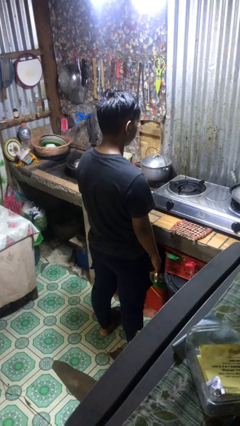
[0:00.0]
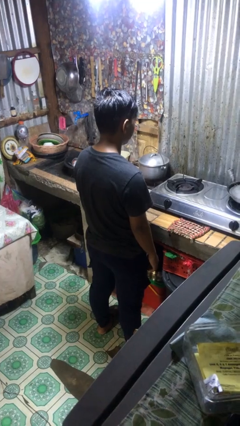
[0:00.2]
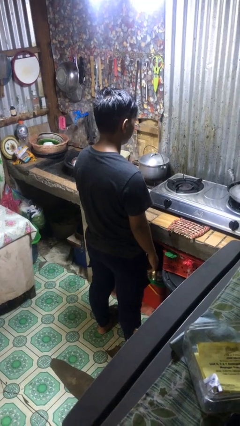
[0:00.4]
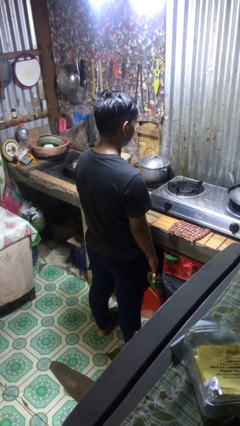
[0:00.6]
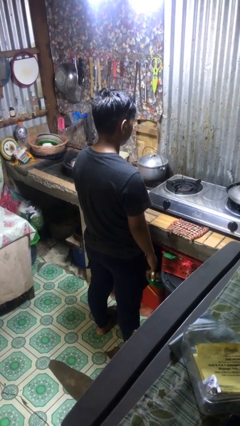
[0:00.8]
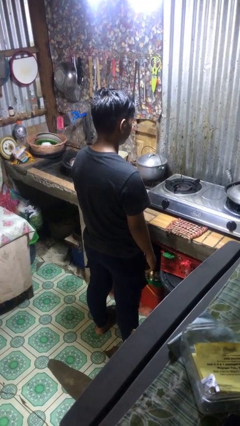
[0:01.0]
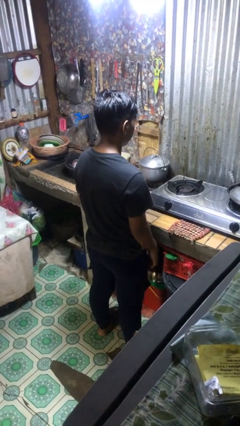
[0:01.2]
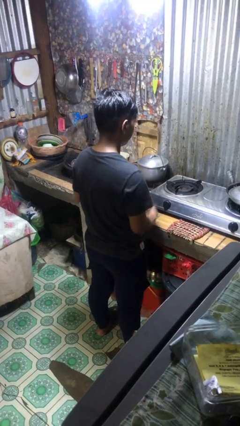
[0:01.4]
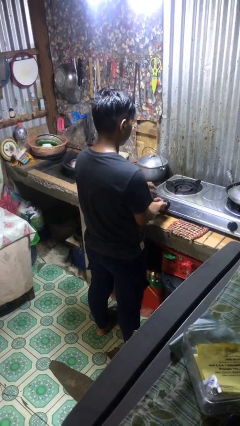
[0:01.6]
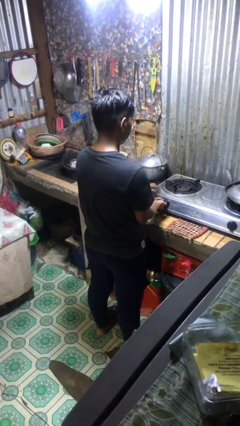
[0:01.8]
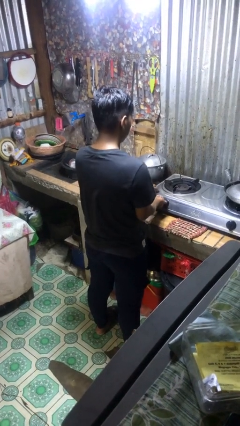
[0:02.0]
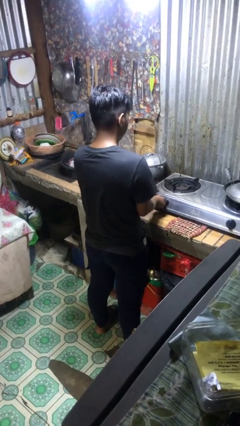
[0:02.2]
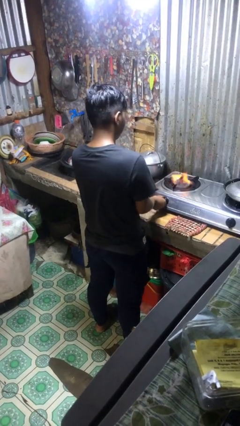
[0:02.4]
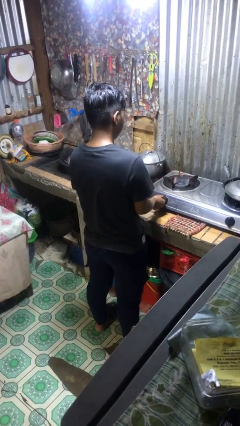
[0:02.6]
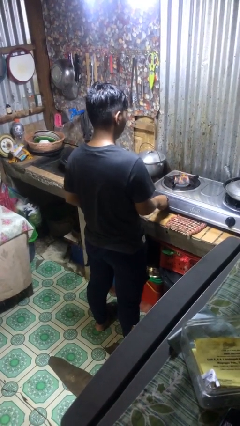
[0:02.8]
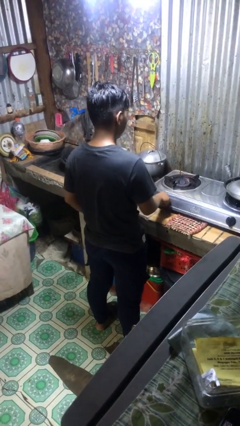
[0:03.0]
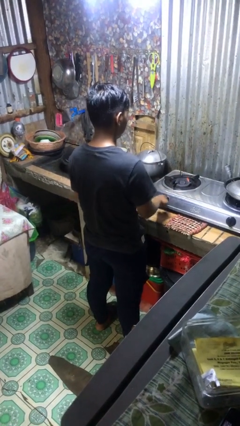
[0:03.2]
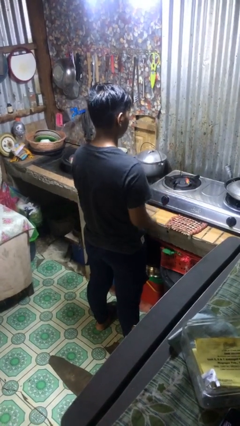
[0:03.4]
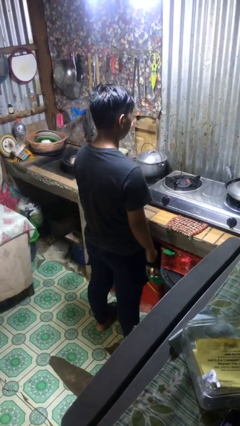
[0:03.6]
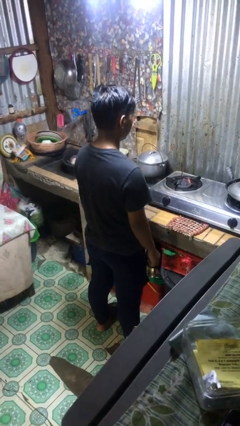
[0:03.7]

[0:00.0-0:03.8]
person turns on stovetop

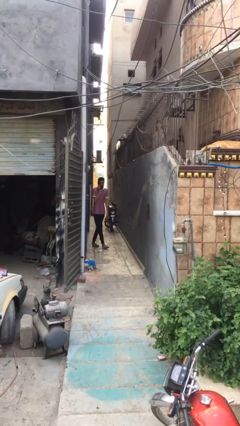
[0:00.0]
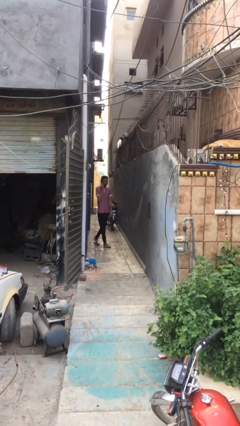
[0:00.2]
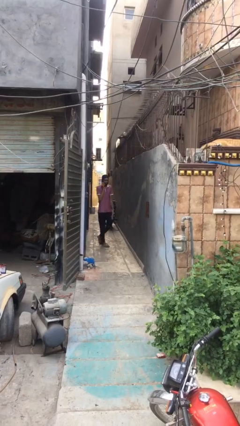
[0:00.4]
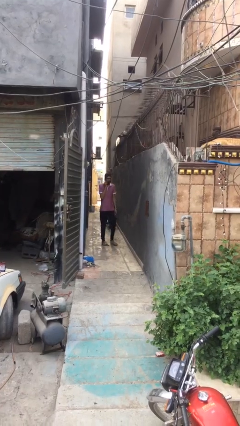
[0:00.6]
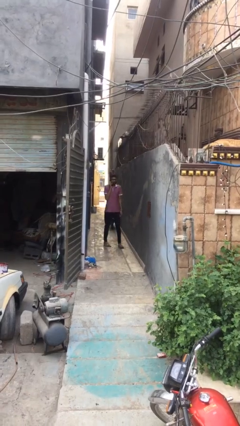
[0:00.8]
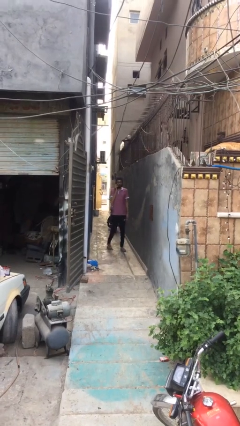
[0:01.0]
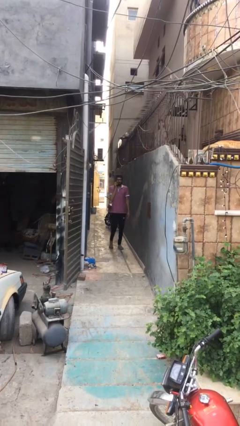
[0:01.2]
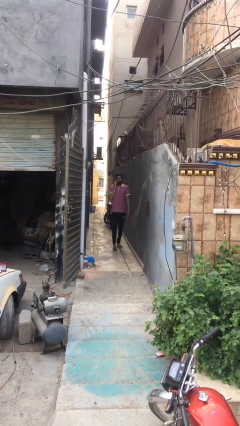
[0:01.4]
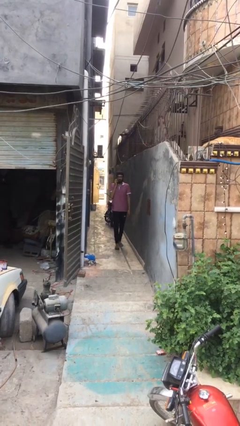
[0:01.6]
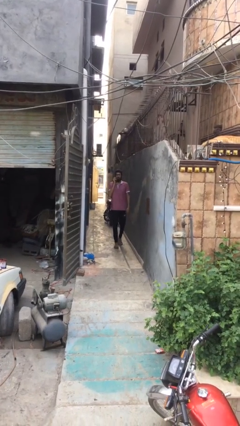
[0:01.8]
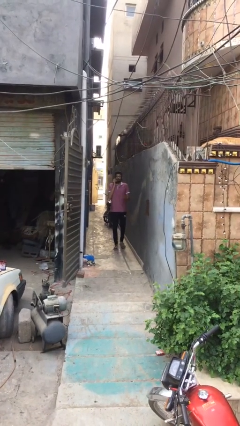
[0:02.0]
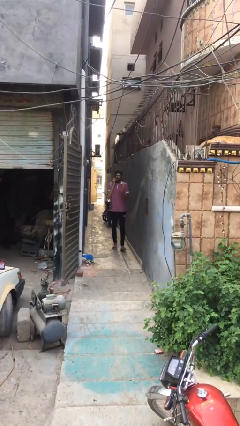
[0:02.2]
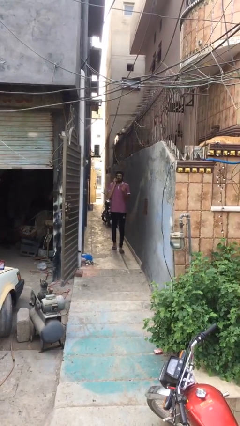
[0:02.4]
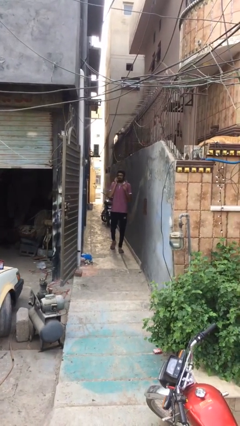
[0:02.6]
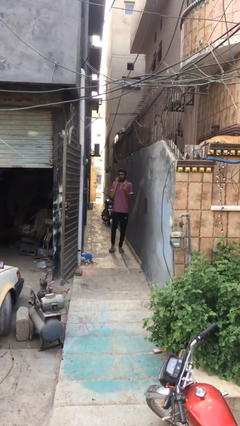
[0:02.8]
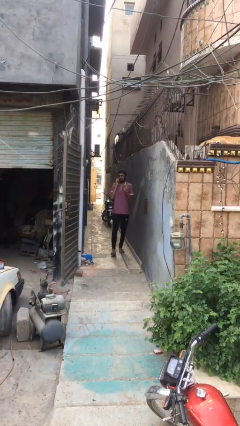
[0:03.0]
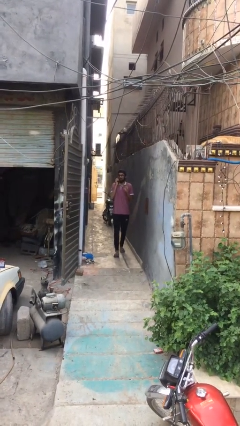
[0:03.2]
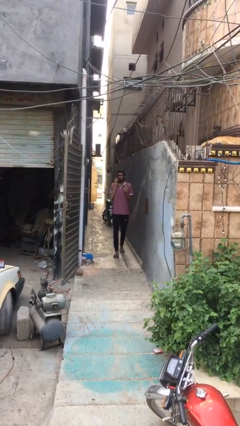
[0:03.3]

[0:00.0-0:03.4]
person enters scene through structure

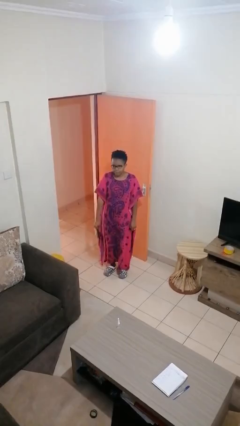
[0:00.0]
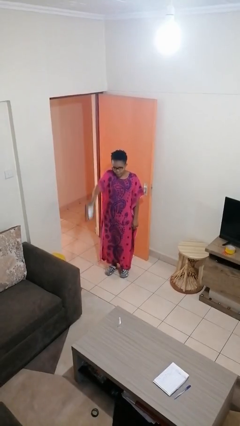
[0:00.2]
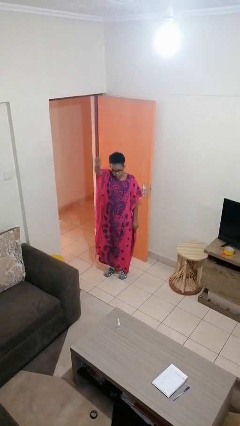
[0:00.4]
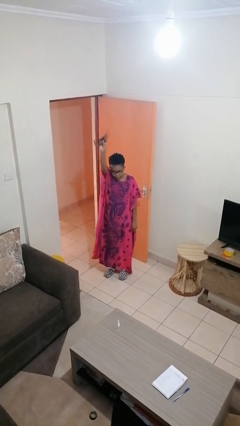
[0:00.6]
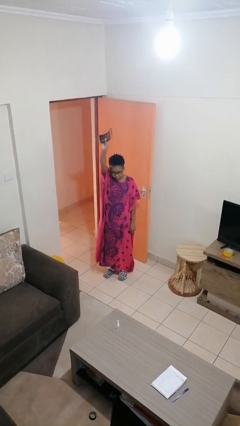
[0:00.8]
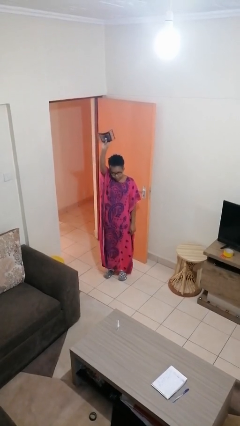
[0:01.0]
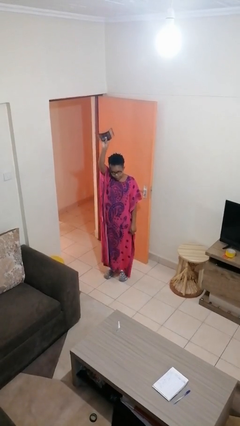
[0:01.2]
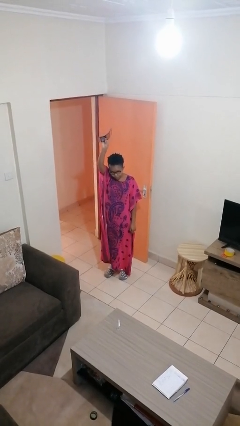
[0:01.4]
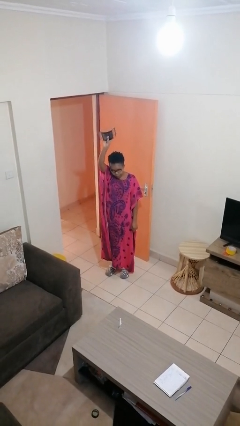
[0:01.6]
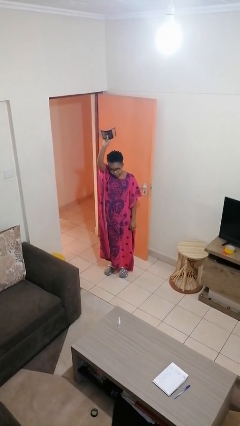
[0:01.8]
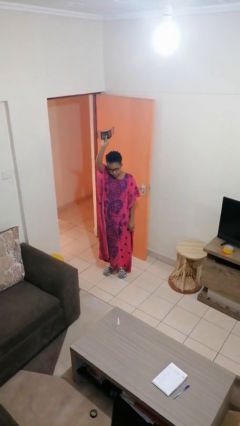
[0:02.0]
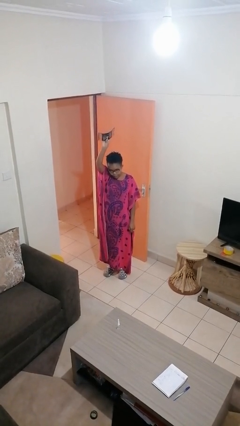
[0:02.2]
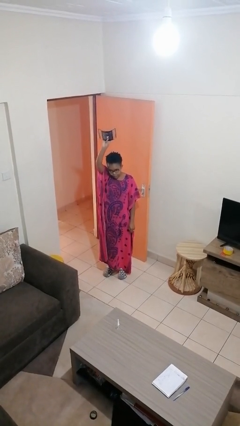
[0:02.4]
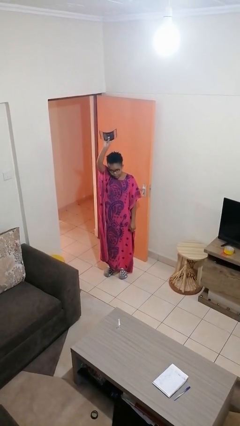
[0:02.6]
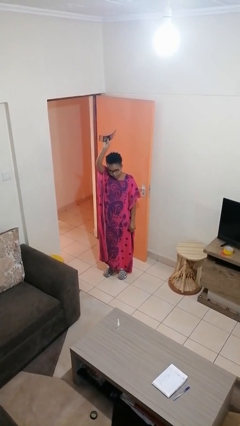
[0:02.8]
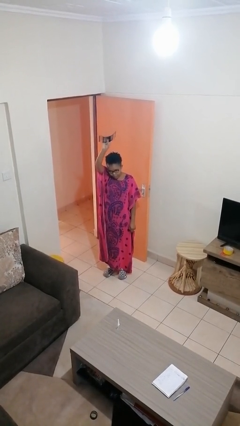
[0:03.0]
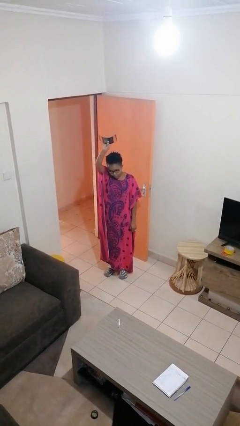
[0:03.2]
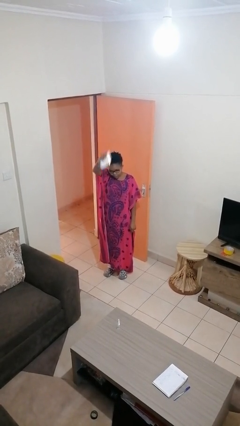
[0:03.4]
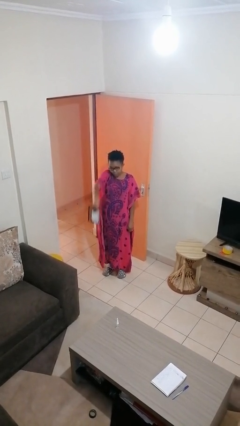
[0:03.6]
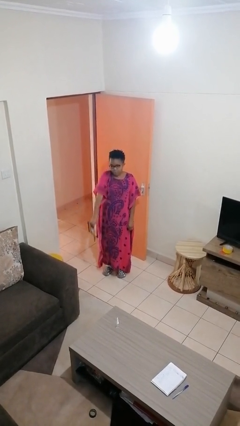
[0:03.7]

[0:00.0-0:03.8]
person holds object above head

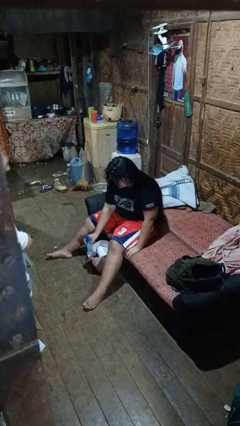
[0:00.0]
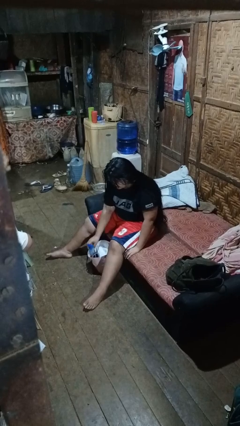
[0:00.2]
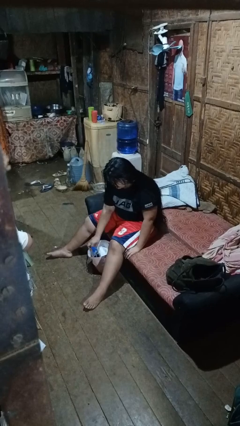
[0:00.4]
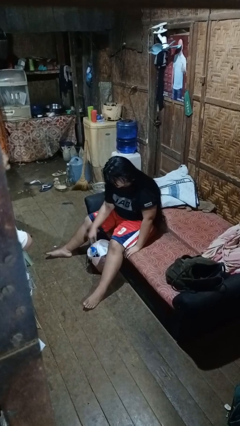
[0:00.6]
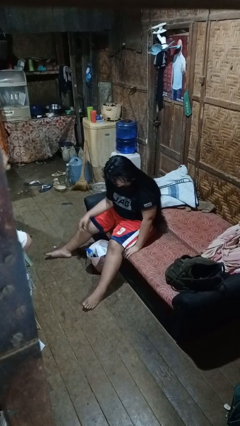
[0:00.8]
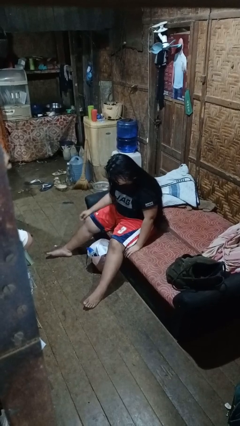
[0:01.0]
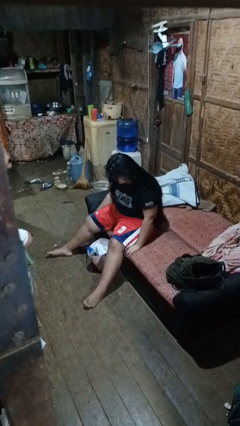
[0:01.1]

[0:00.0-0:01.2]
person puts object into bag

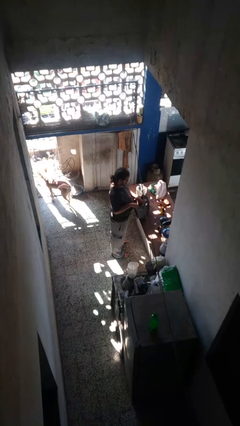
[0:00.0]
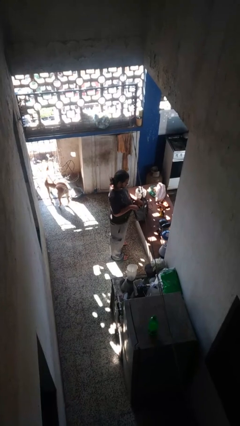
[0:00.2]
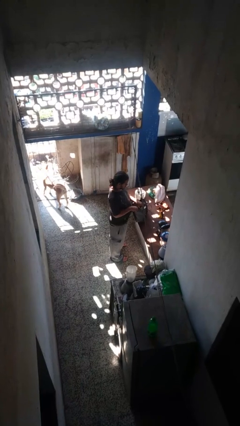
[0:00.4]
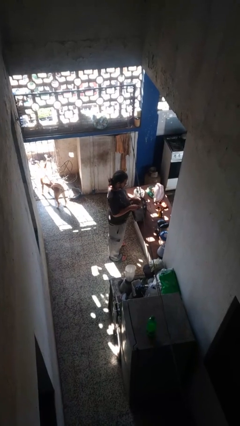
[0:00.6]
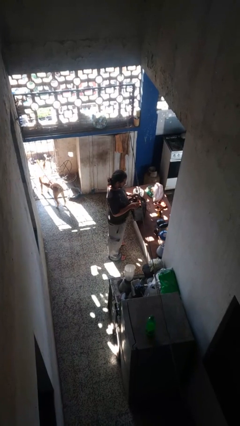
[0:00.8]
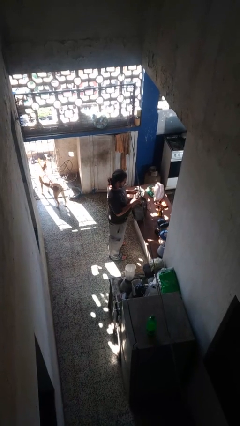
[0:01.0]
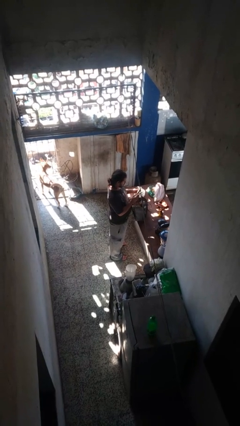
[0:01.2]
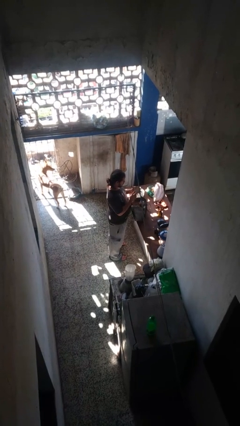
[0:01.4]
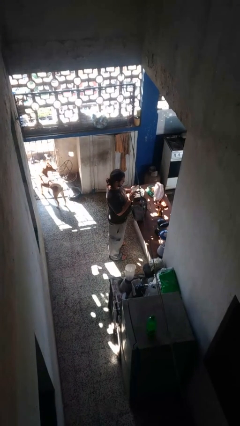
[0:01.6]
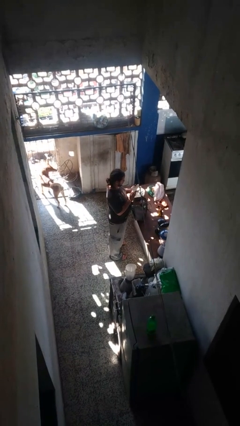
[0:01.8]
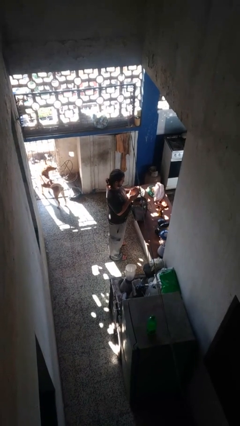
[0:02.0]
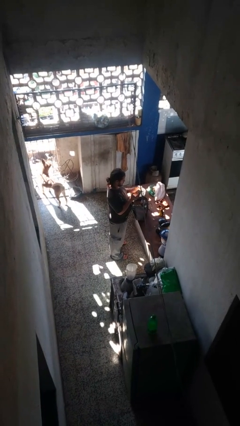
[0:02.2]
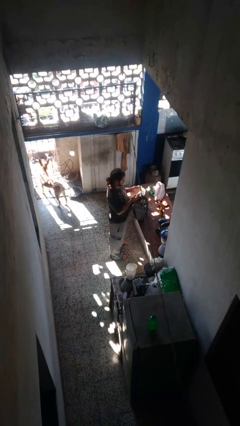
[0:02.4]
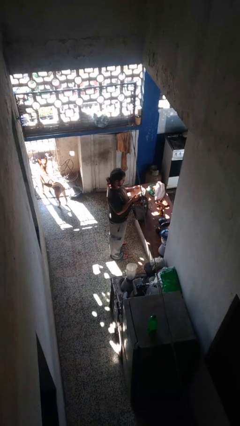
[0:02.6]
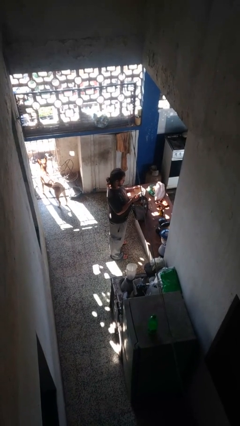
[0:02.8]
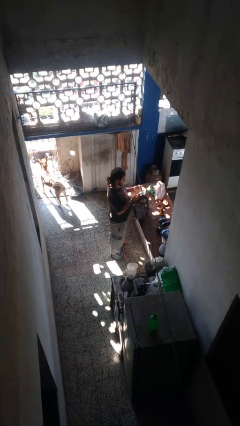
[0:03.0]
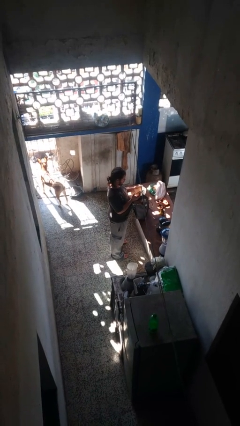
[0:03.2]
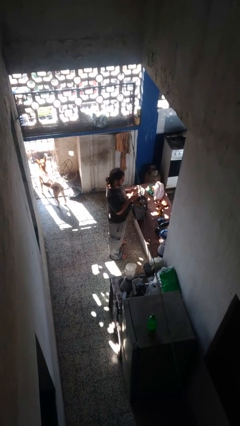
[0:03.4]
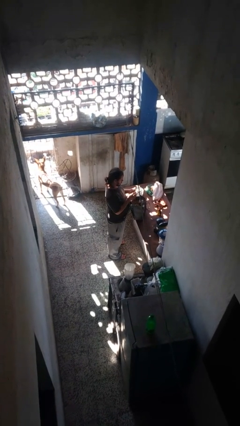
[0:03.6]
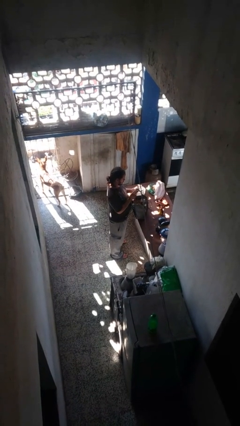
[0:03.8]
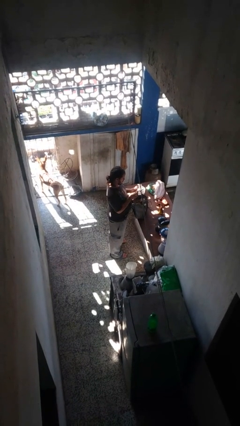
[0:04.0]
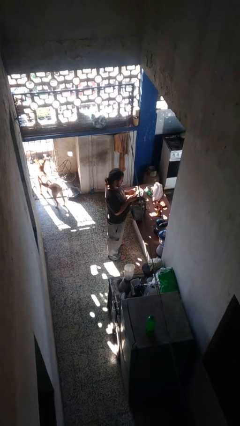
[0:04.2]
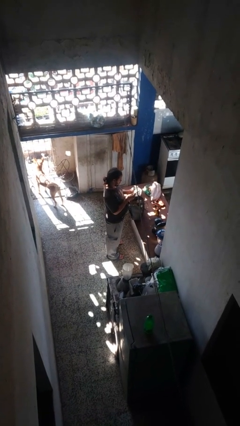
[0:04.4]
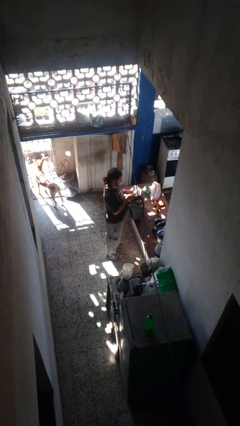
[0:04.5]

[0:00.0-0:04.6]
person takes object from purse

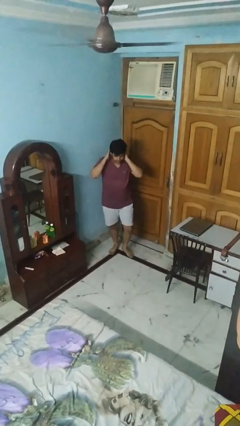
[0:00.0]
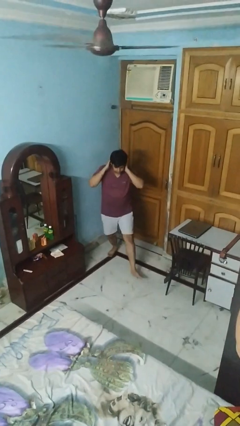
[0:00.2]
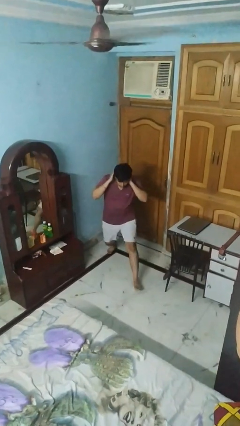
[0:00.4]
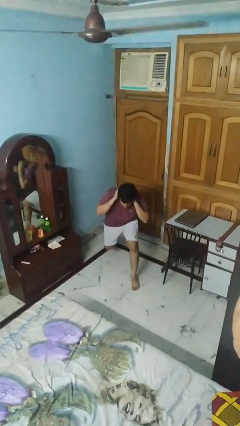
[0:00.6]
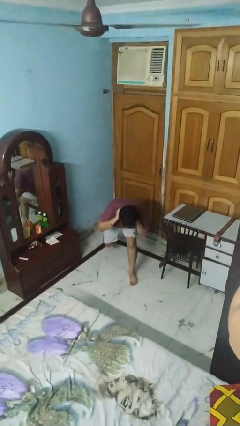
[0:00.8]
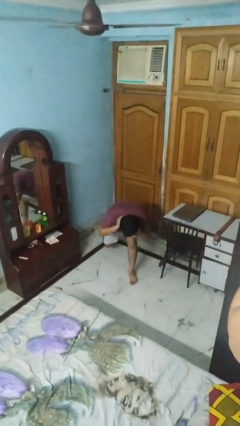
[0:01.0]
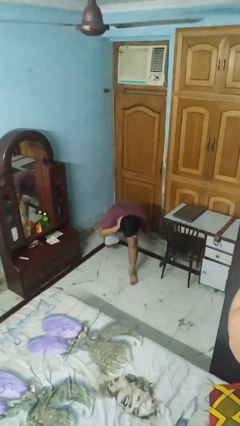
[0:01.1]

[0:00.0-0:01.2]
person exercises with lunges
